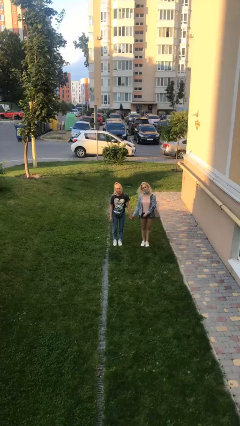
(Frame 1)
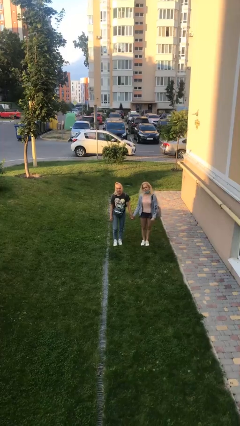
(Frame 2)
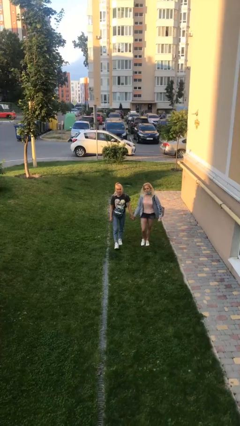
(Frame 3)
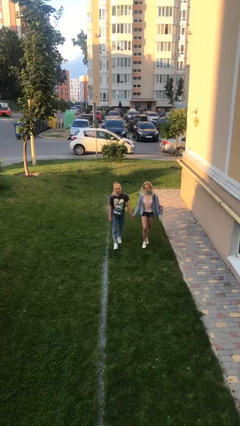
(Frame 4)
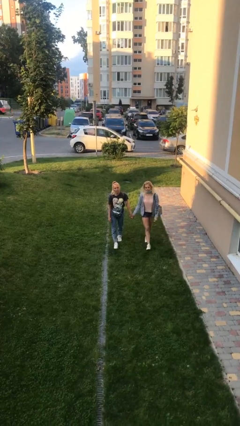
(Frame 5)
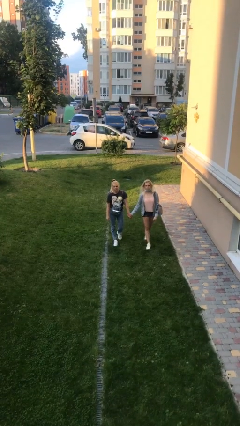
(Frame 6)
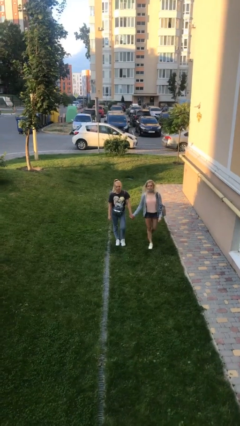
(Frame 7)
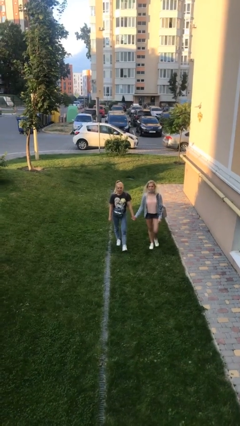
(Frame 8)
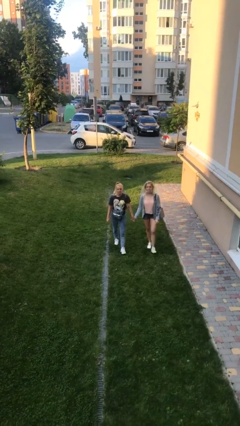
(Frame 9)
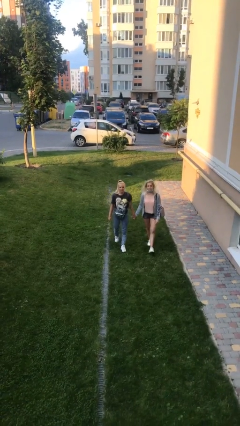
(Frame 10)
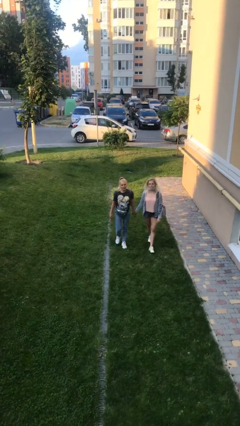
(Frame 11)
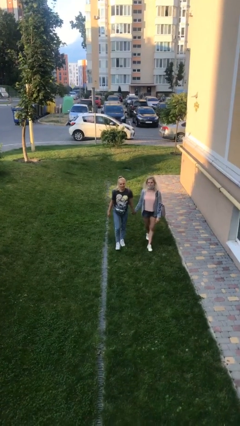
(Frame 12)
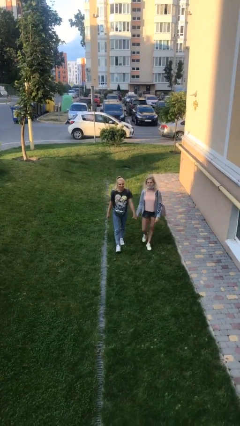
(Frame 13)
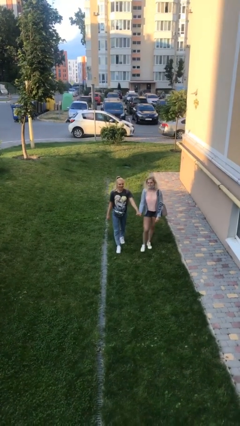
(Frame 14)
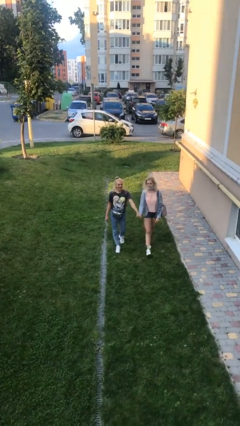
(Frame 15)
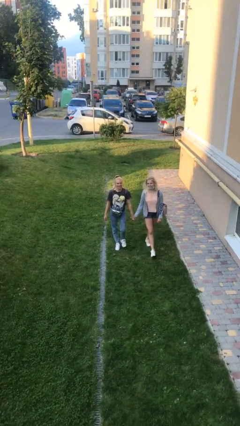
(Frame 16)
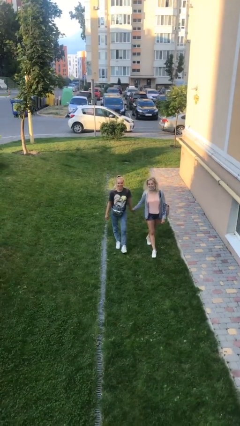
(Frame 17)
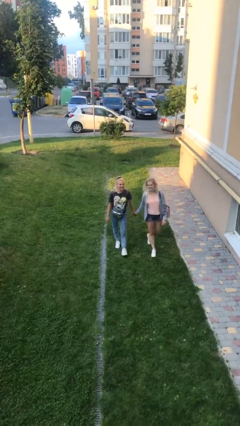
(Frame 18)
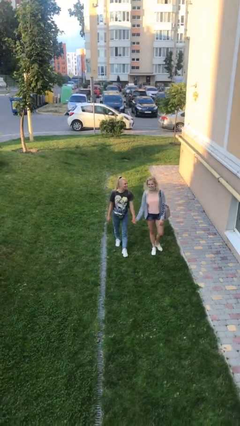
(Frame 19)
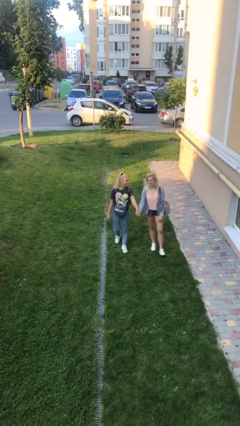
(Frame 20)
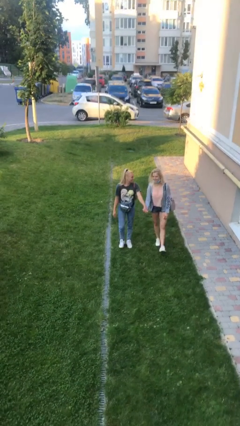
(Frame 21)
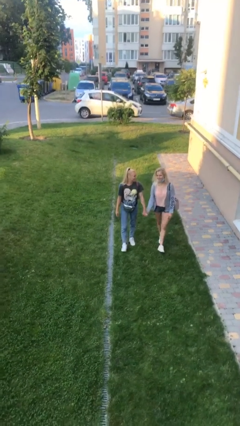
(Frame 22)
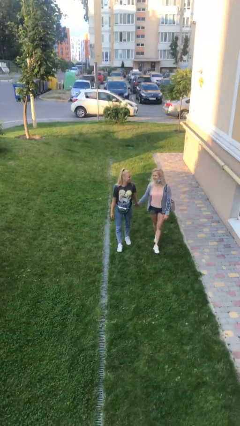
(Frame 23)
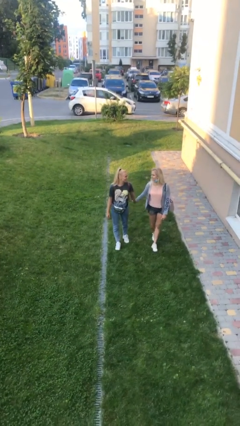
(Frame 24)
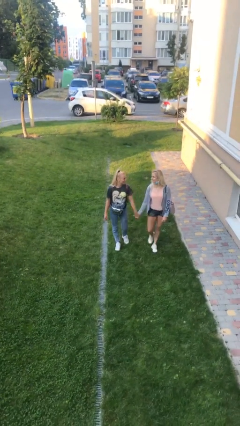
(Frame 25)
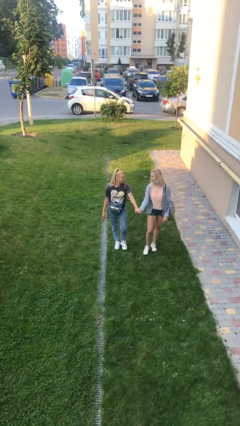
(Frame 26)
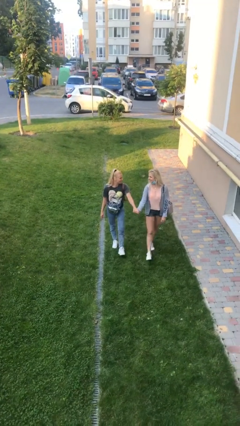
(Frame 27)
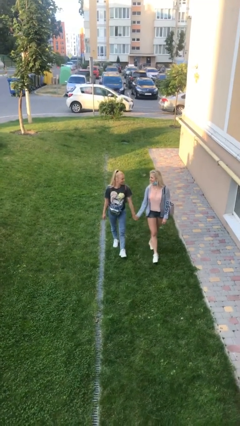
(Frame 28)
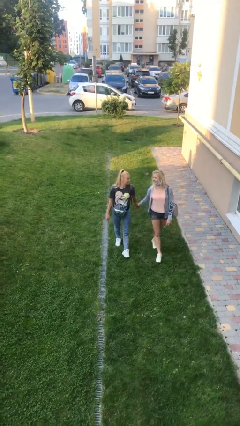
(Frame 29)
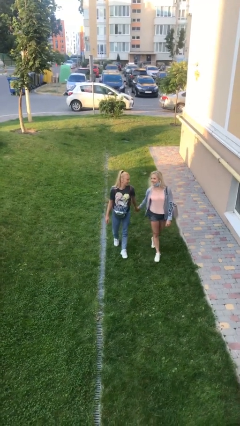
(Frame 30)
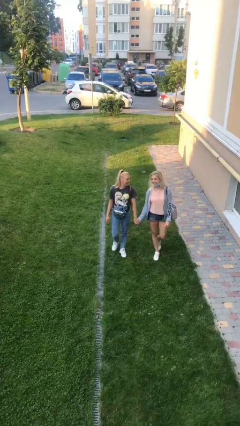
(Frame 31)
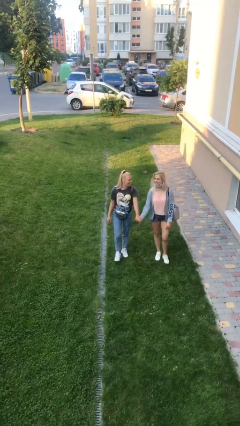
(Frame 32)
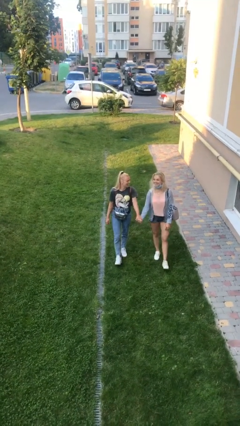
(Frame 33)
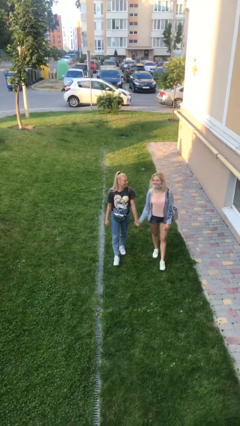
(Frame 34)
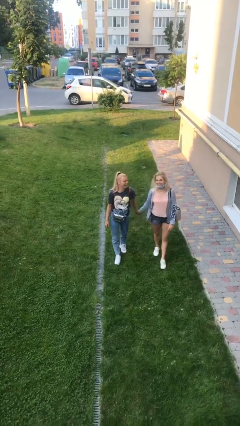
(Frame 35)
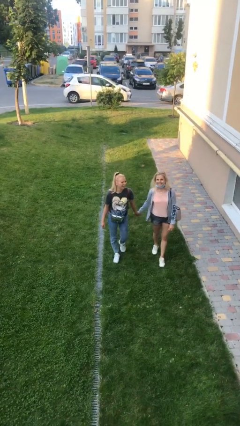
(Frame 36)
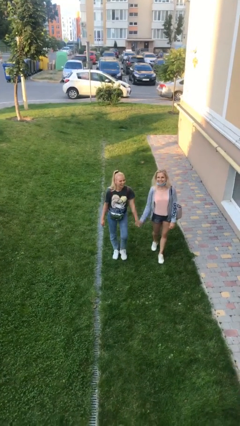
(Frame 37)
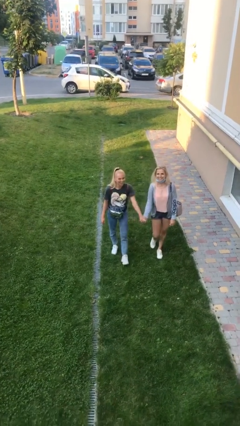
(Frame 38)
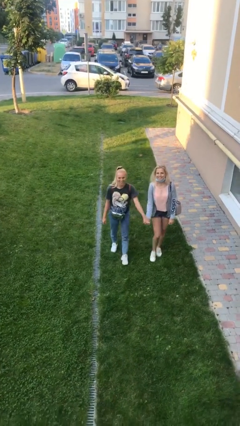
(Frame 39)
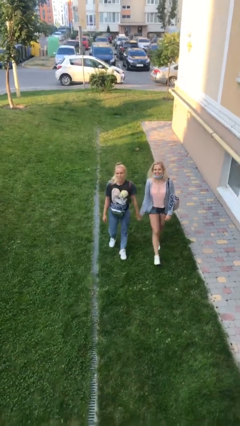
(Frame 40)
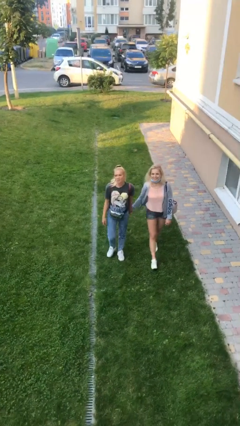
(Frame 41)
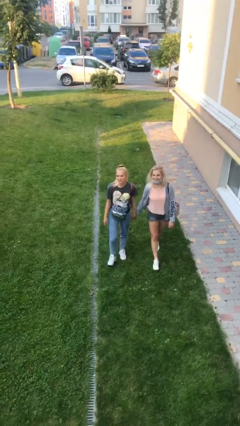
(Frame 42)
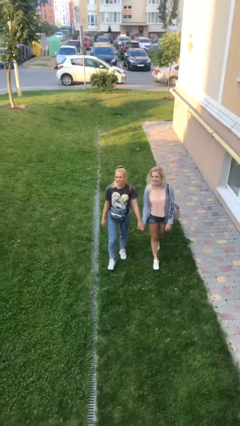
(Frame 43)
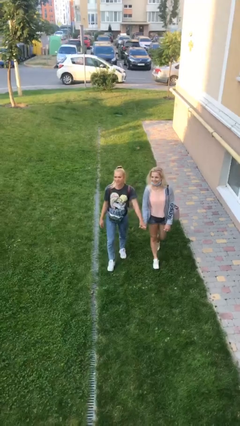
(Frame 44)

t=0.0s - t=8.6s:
person holds hand

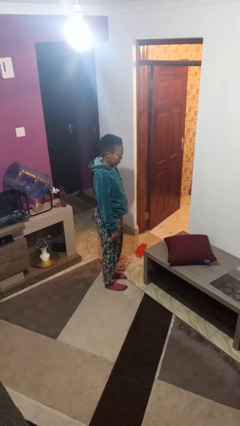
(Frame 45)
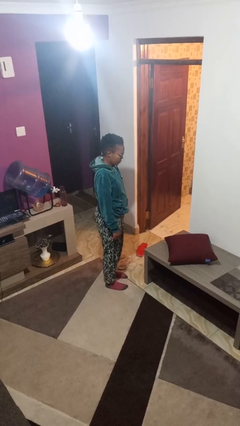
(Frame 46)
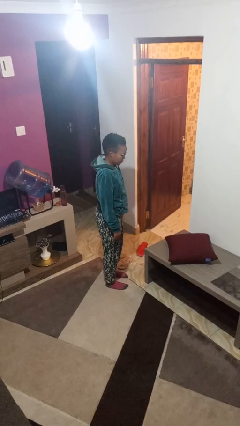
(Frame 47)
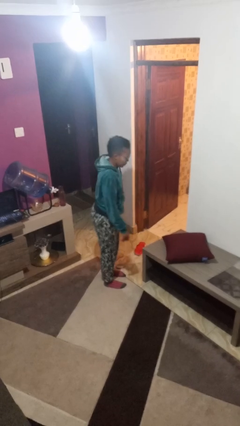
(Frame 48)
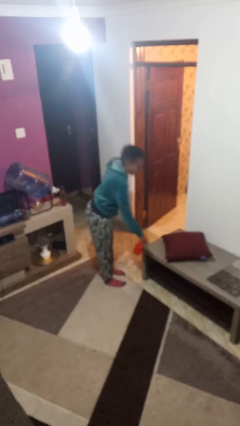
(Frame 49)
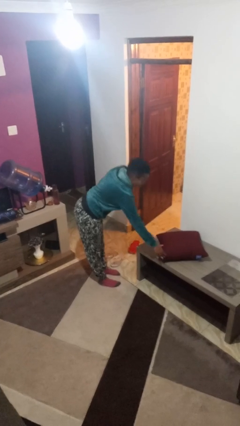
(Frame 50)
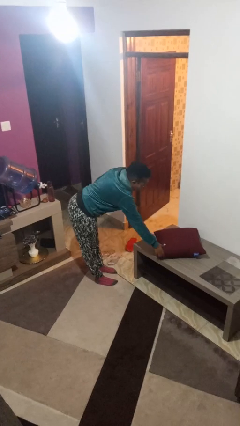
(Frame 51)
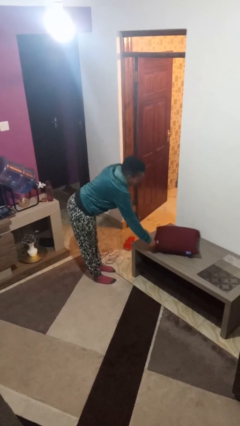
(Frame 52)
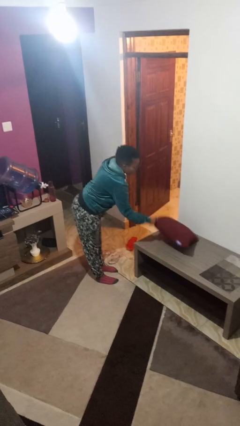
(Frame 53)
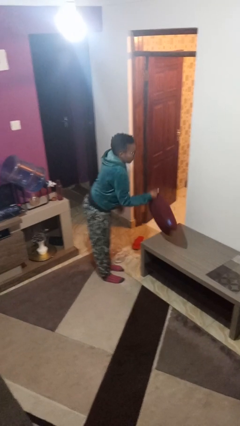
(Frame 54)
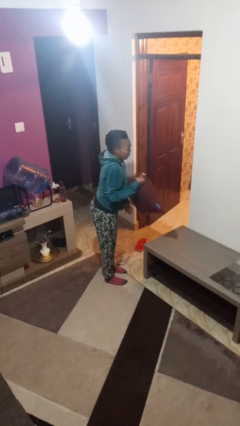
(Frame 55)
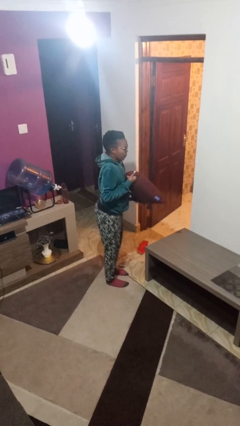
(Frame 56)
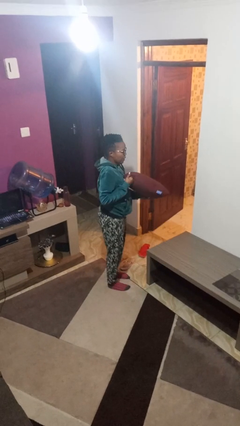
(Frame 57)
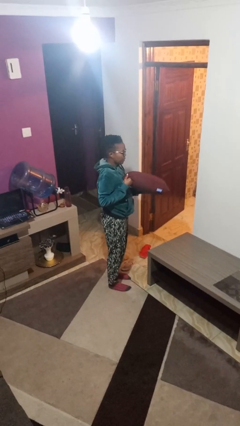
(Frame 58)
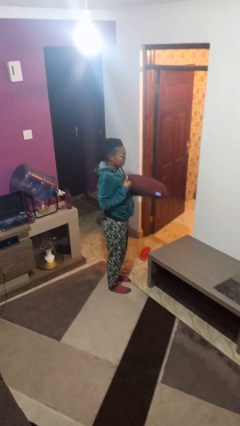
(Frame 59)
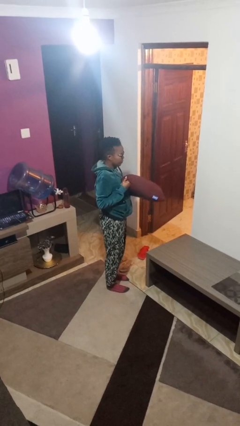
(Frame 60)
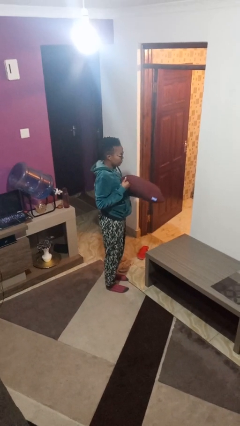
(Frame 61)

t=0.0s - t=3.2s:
person picks up object from table

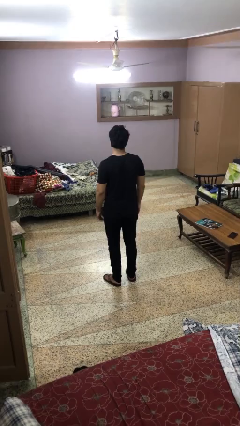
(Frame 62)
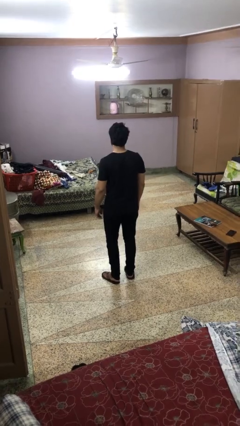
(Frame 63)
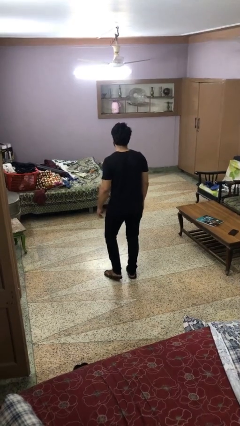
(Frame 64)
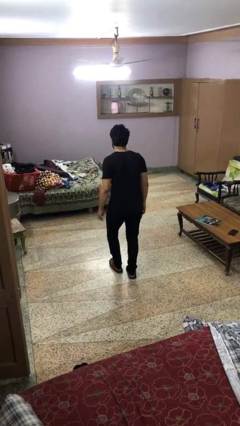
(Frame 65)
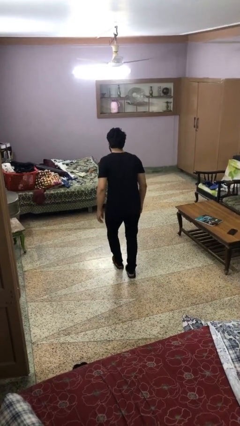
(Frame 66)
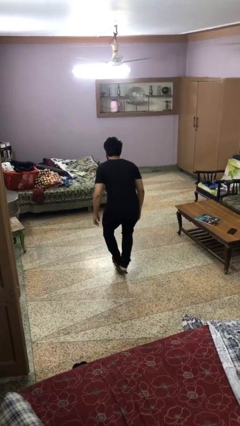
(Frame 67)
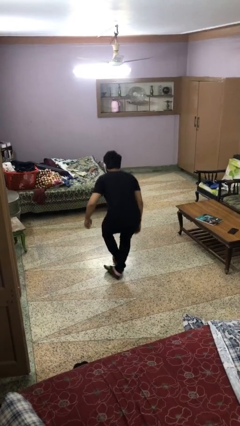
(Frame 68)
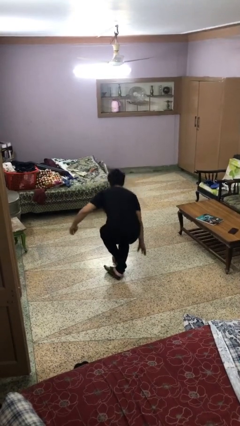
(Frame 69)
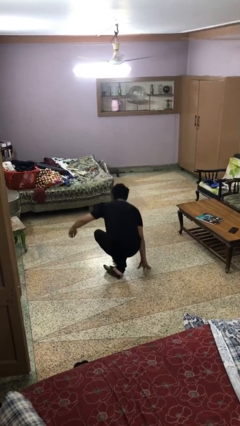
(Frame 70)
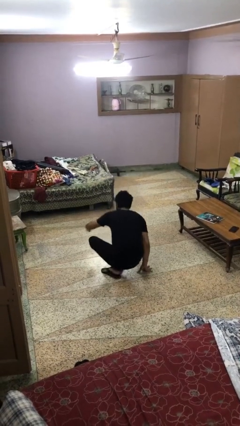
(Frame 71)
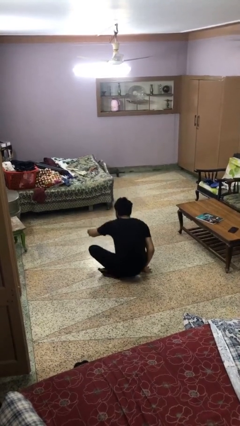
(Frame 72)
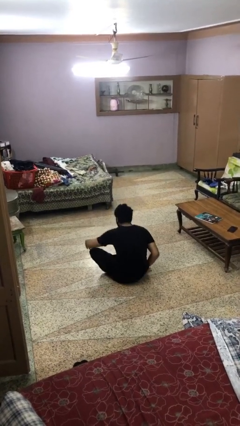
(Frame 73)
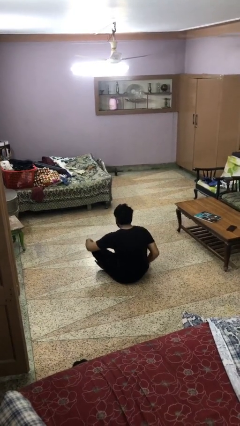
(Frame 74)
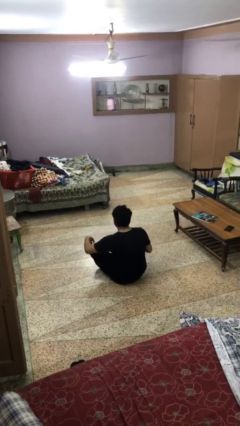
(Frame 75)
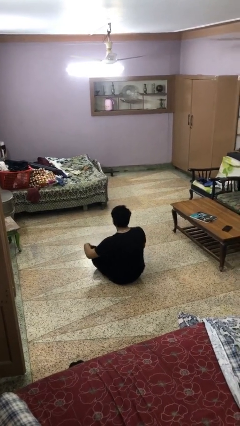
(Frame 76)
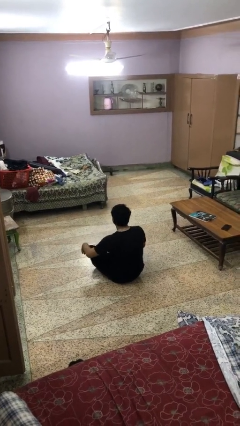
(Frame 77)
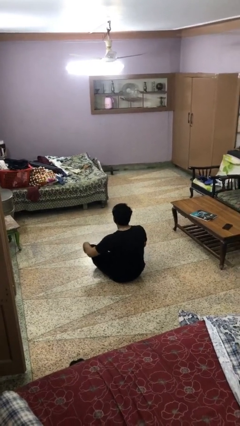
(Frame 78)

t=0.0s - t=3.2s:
person sits crisscross

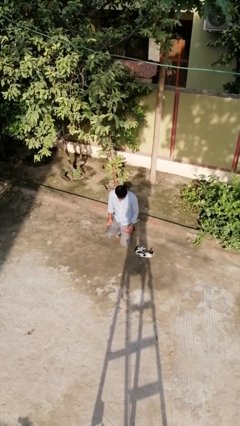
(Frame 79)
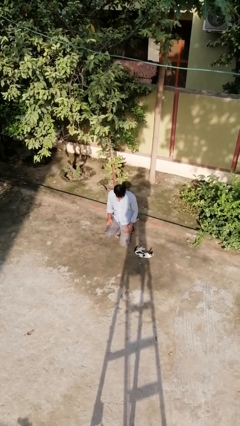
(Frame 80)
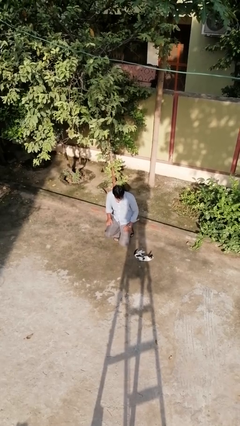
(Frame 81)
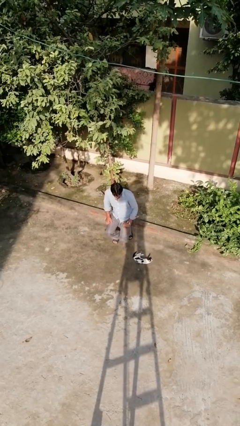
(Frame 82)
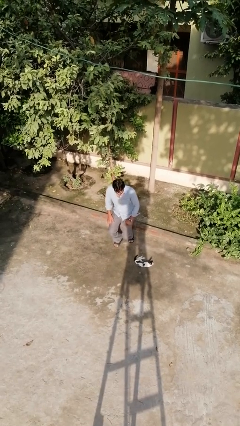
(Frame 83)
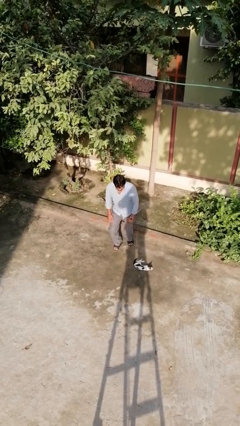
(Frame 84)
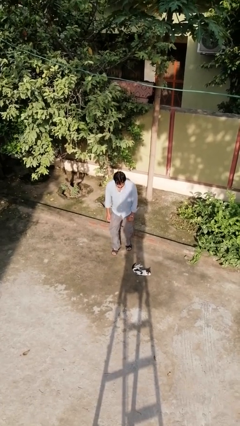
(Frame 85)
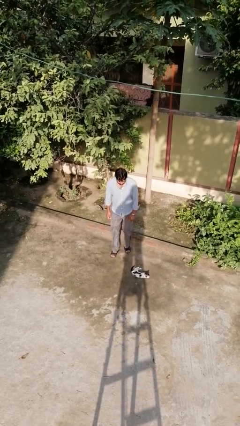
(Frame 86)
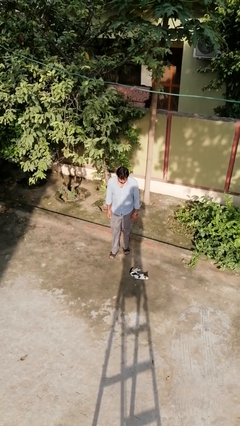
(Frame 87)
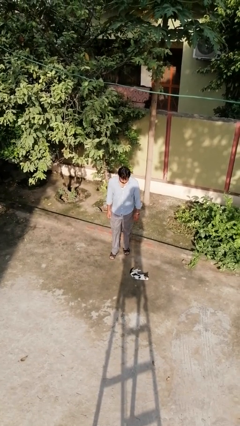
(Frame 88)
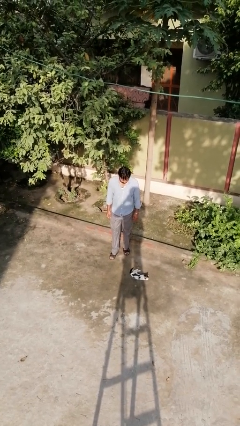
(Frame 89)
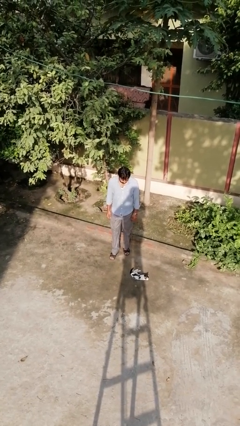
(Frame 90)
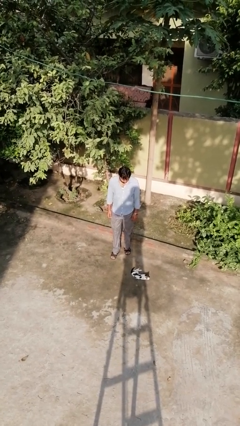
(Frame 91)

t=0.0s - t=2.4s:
person stands up from floor

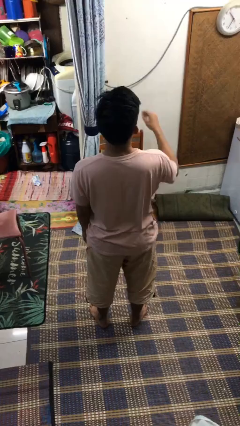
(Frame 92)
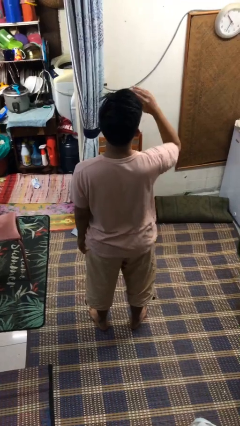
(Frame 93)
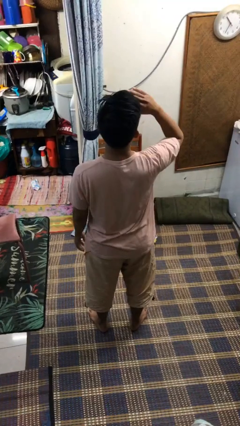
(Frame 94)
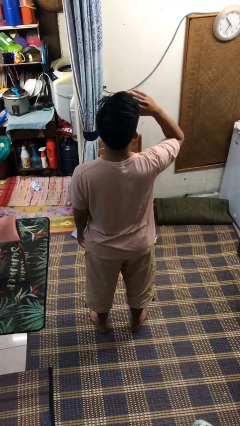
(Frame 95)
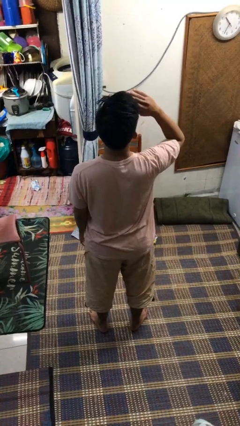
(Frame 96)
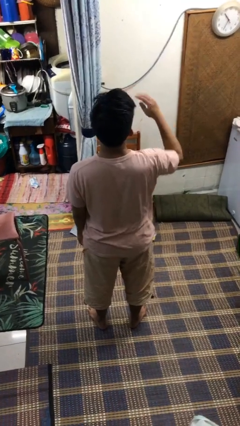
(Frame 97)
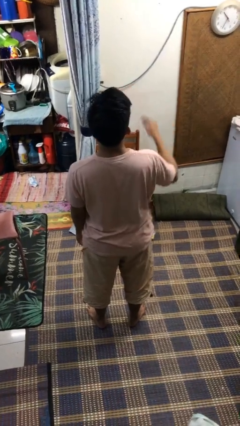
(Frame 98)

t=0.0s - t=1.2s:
person salutes
